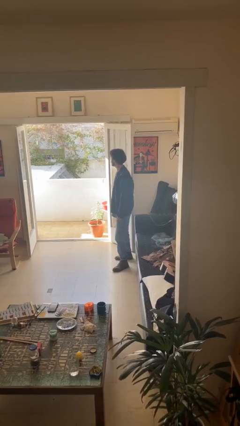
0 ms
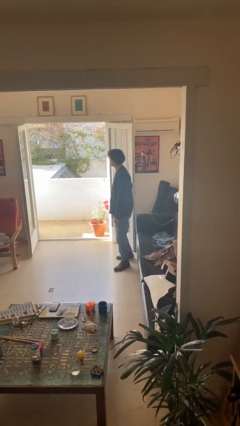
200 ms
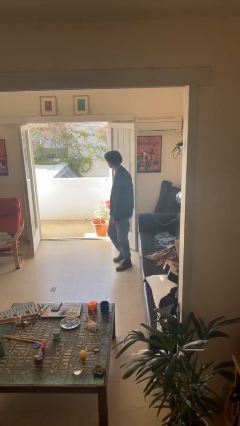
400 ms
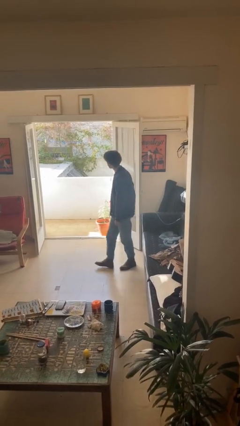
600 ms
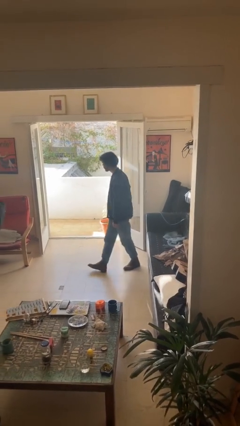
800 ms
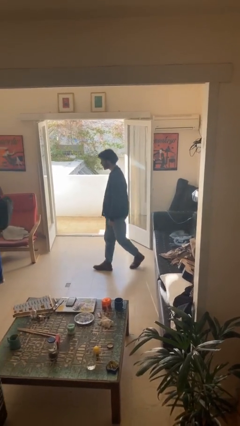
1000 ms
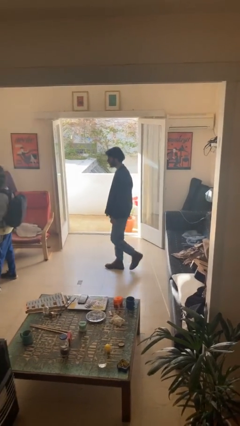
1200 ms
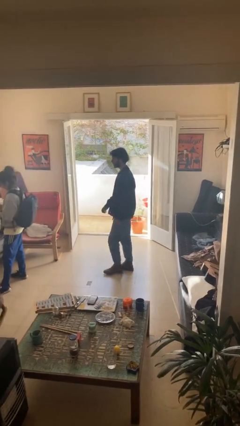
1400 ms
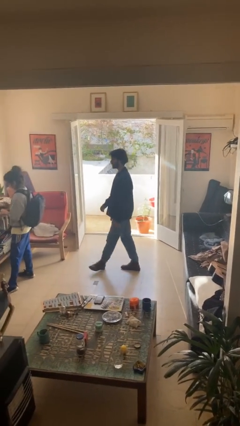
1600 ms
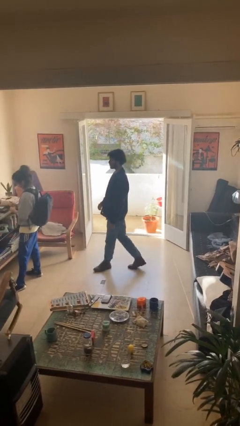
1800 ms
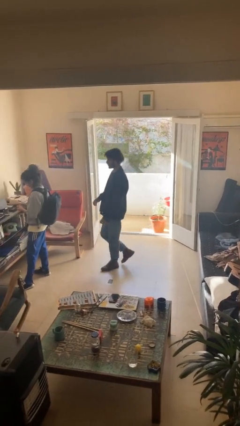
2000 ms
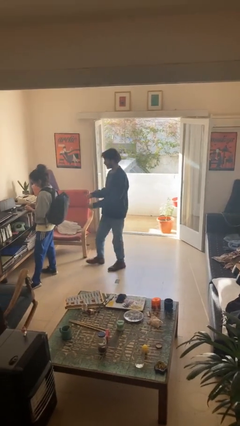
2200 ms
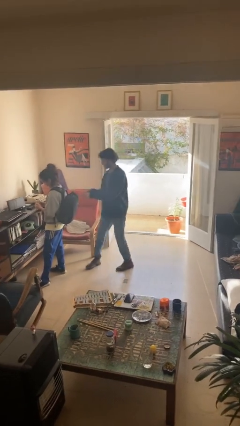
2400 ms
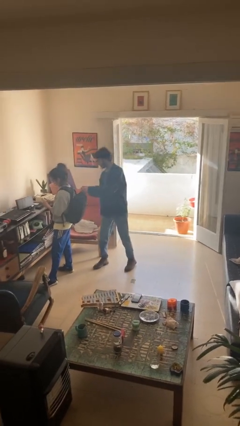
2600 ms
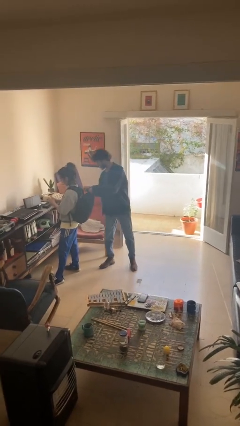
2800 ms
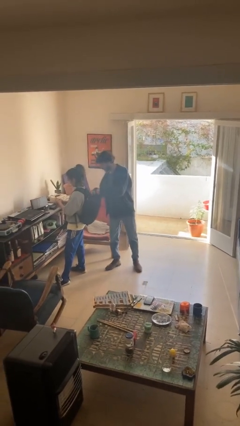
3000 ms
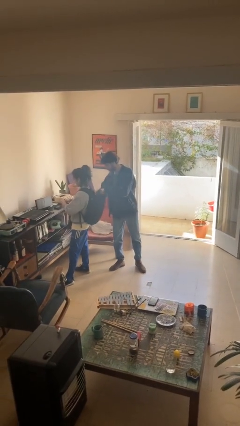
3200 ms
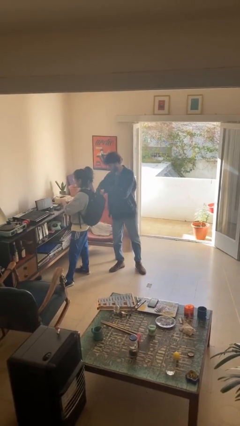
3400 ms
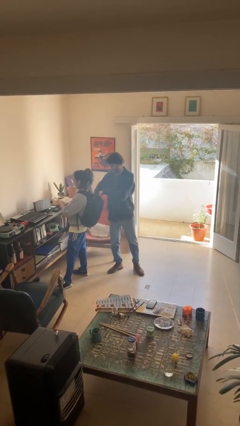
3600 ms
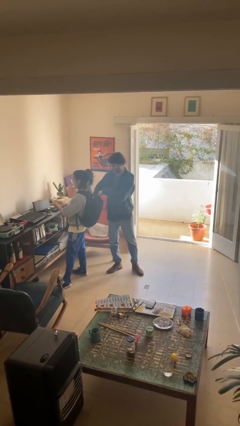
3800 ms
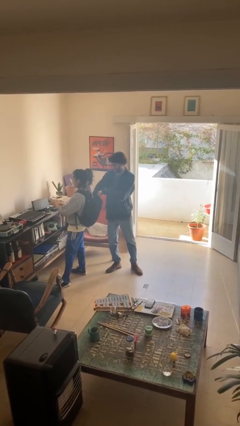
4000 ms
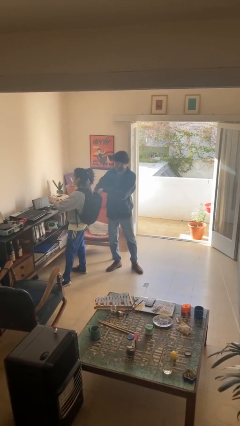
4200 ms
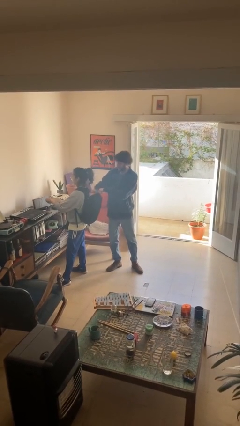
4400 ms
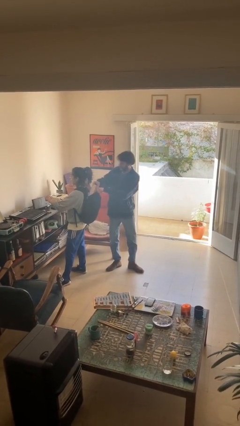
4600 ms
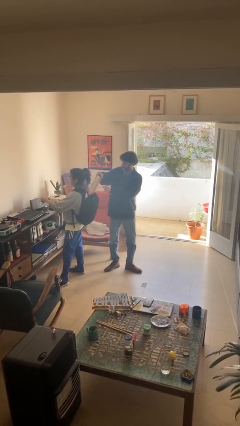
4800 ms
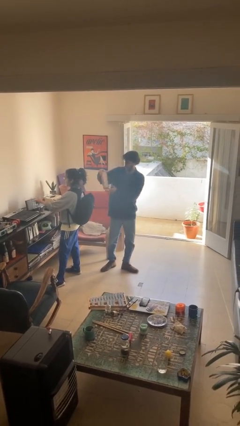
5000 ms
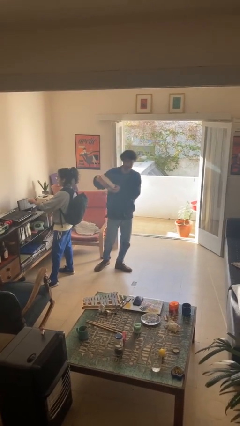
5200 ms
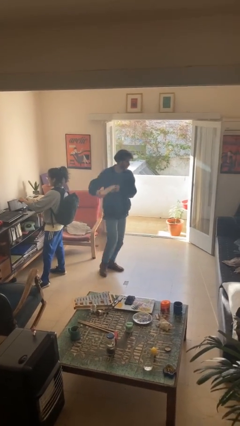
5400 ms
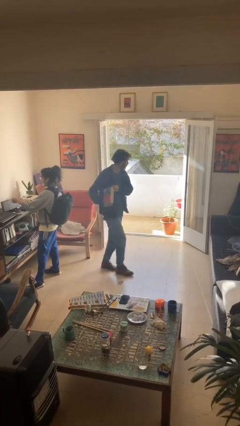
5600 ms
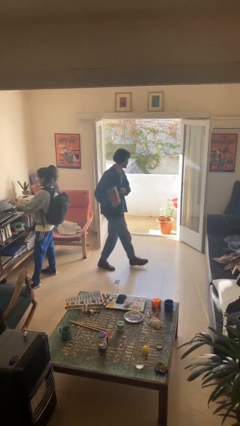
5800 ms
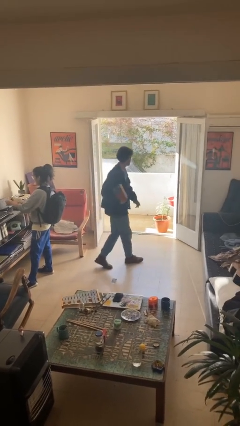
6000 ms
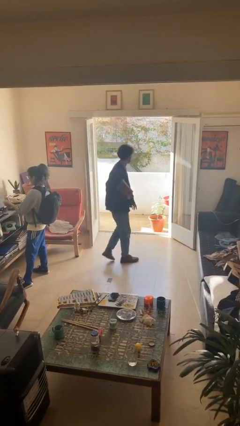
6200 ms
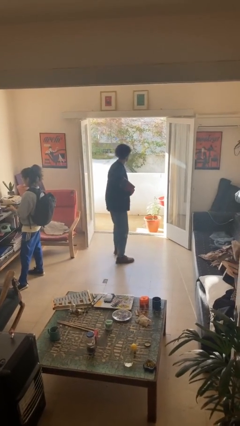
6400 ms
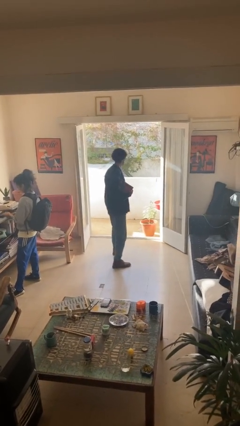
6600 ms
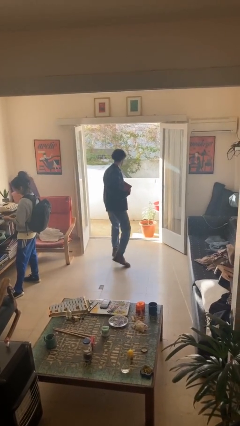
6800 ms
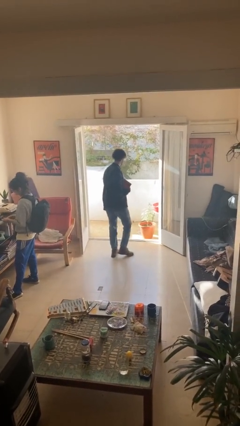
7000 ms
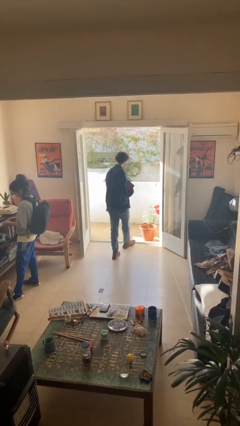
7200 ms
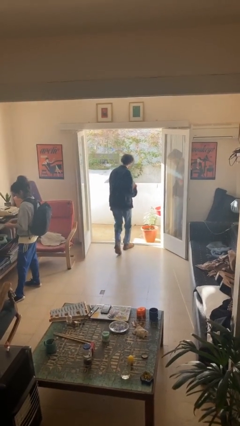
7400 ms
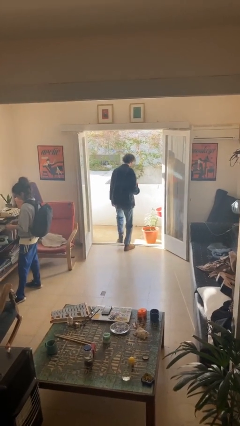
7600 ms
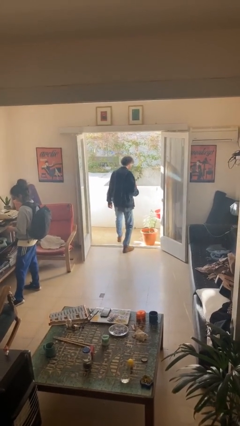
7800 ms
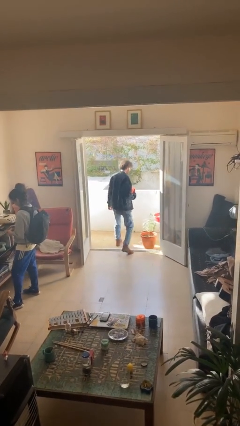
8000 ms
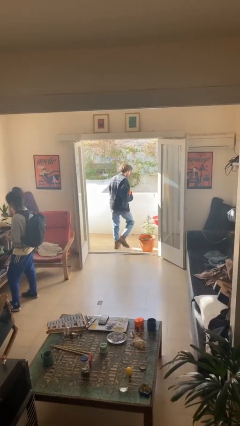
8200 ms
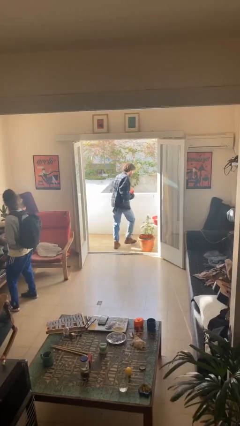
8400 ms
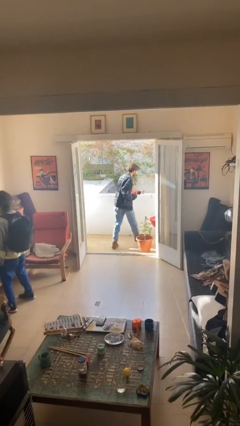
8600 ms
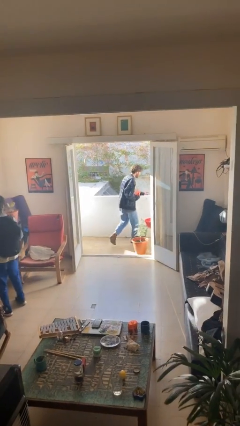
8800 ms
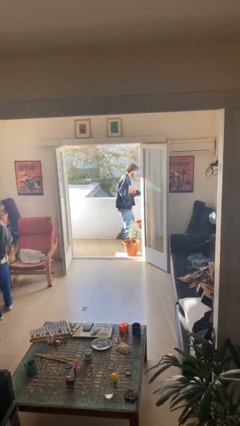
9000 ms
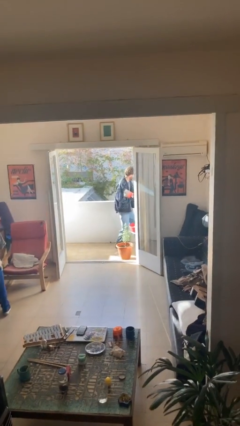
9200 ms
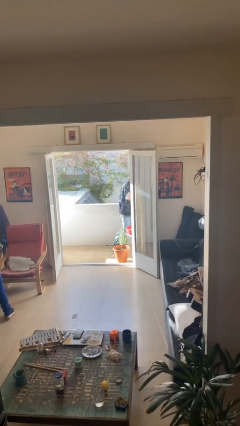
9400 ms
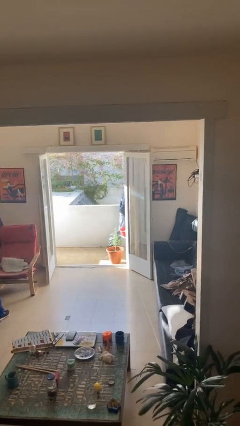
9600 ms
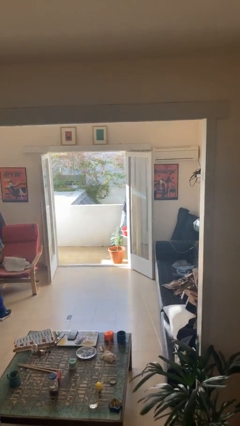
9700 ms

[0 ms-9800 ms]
person steals object from person

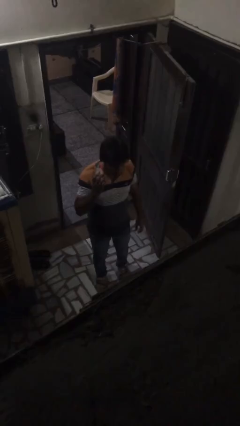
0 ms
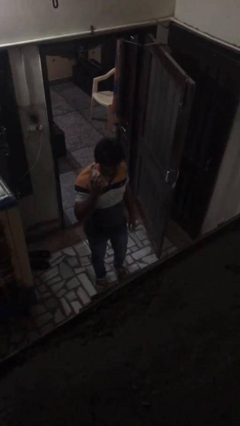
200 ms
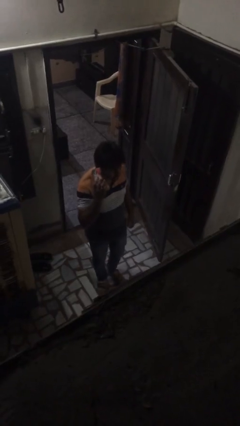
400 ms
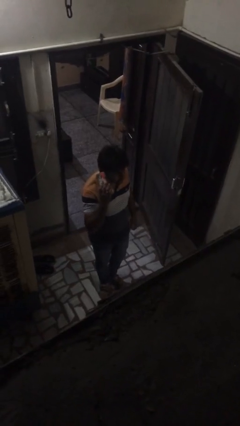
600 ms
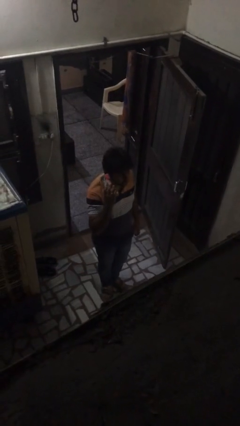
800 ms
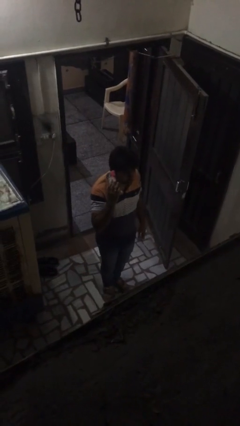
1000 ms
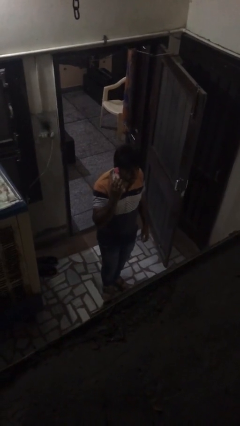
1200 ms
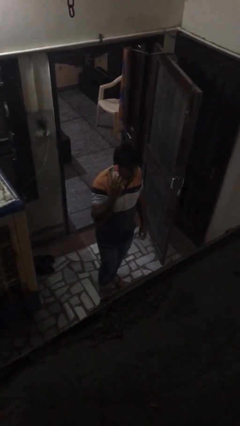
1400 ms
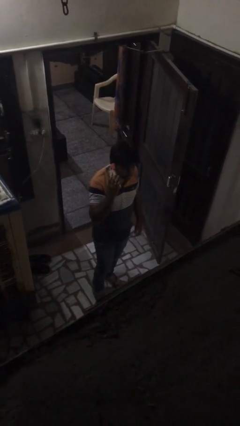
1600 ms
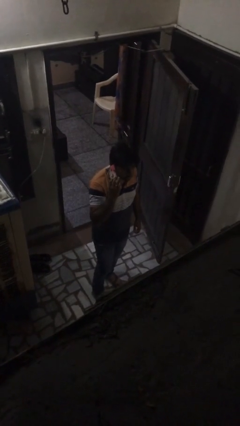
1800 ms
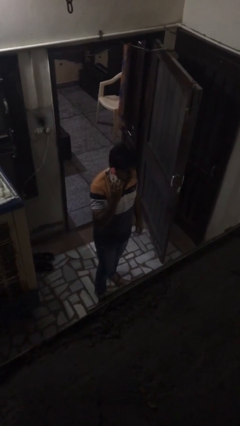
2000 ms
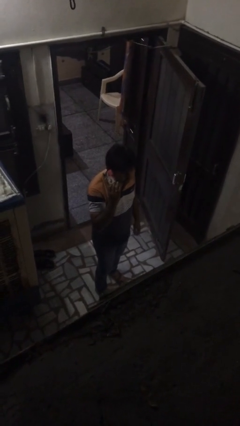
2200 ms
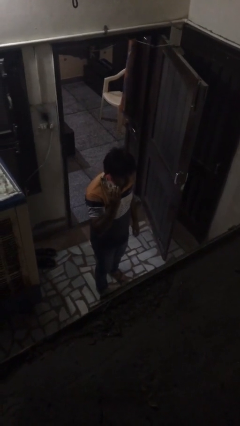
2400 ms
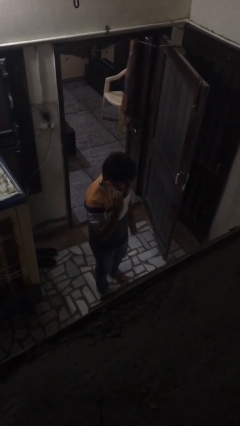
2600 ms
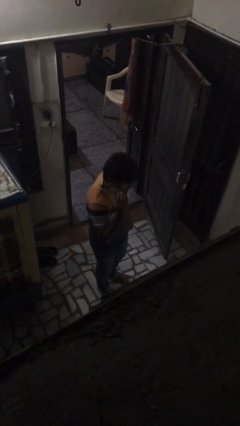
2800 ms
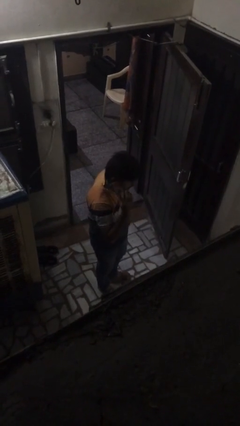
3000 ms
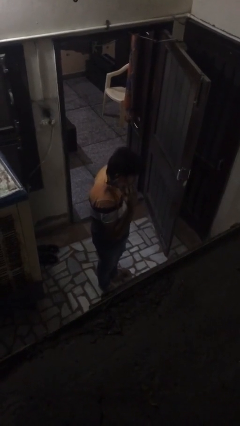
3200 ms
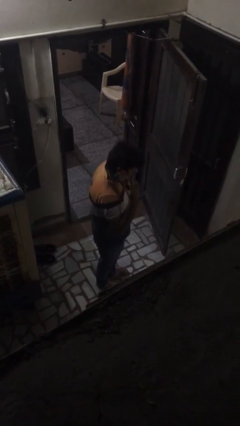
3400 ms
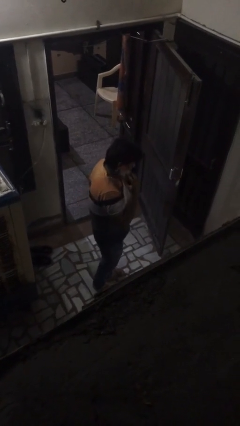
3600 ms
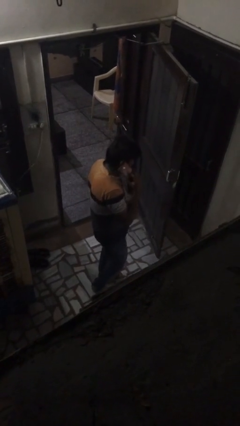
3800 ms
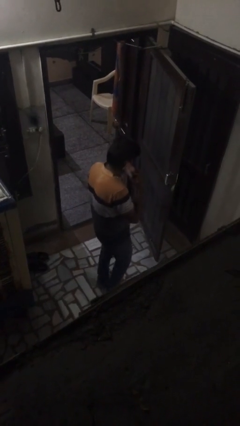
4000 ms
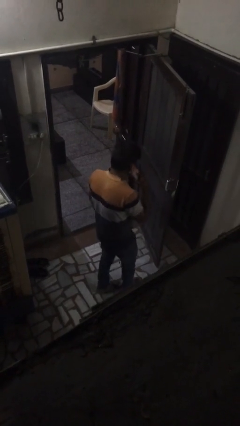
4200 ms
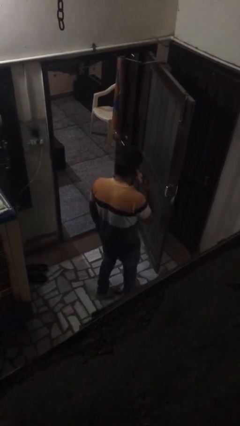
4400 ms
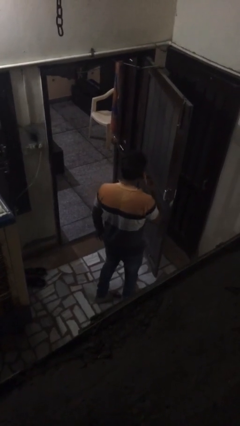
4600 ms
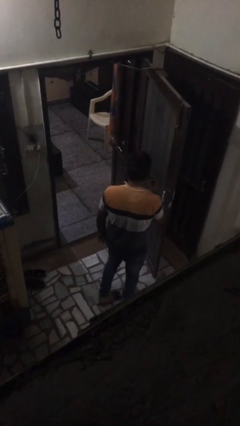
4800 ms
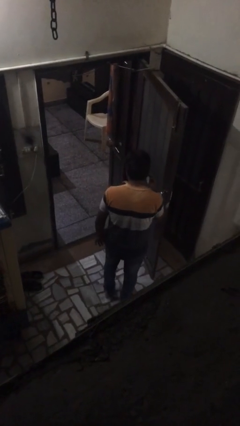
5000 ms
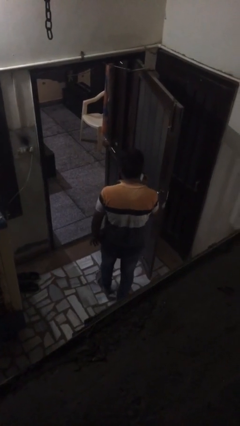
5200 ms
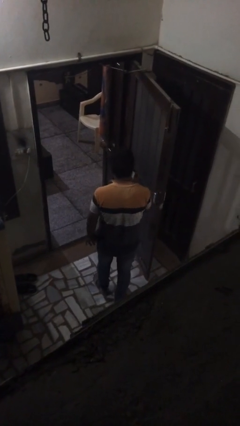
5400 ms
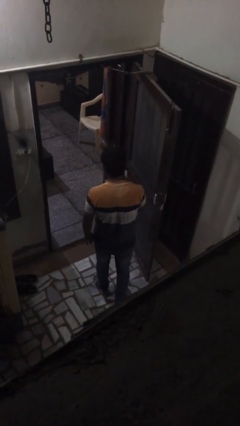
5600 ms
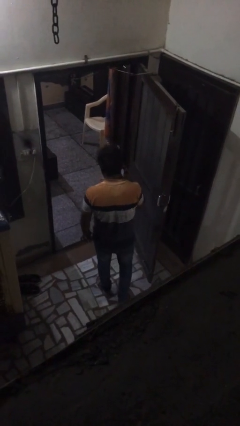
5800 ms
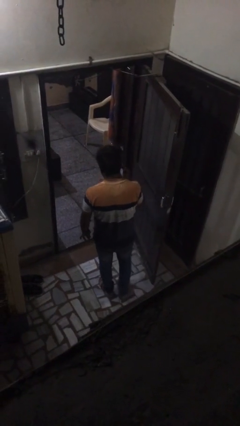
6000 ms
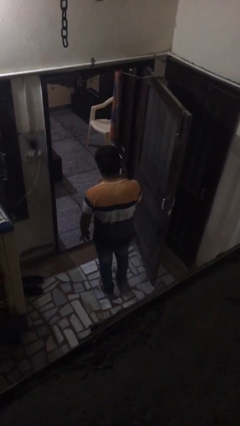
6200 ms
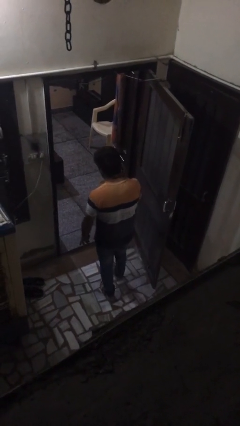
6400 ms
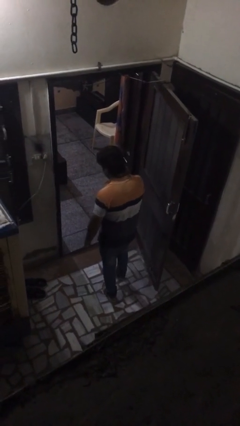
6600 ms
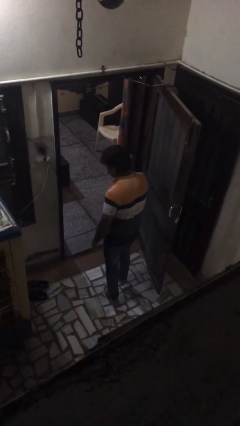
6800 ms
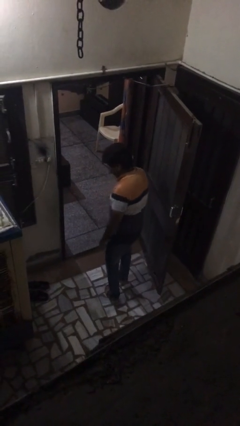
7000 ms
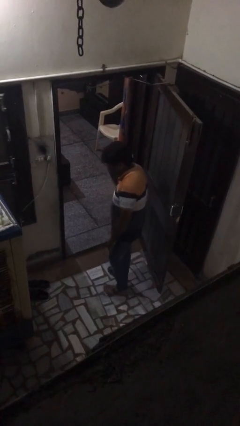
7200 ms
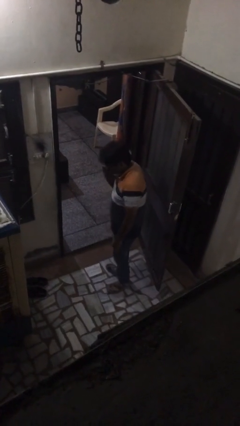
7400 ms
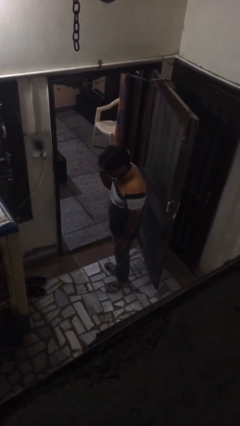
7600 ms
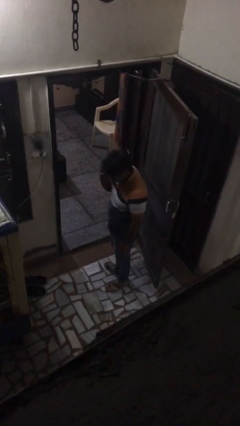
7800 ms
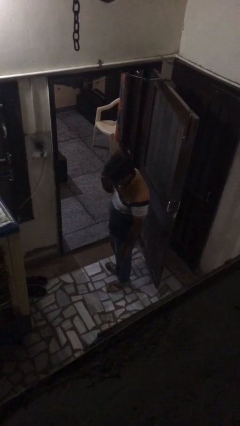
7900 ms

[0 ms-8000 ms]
person talks on phone

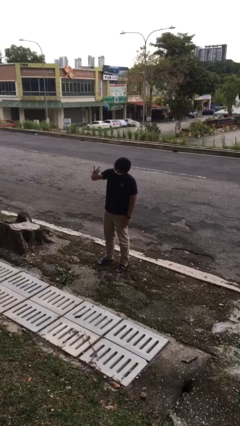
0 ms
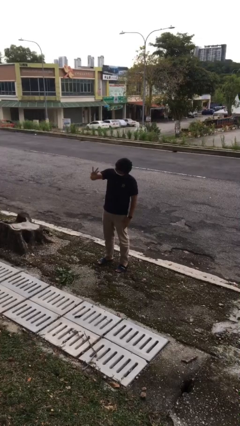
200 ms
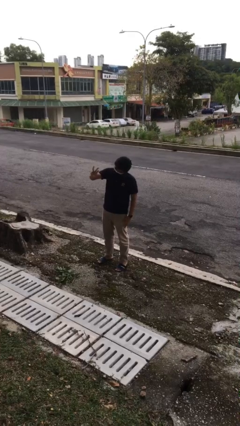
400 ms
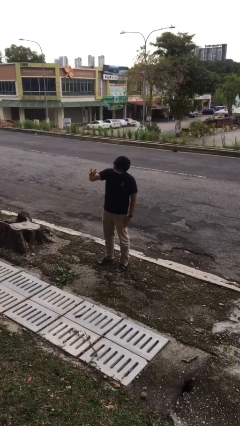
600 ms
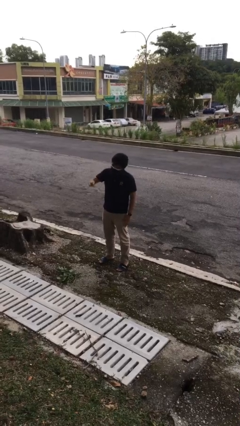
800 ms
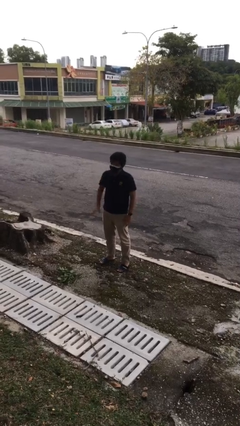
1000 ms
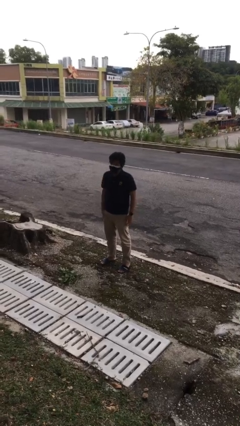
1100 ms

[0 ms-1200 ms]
person gestures number three
